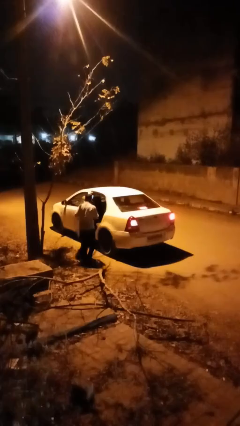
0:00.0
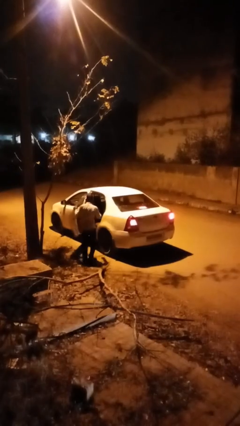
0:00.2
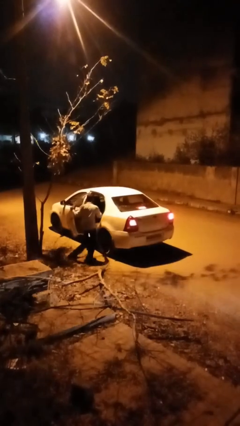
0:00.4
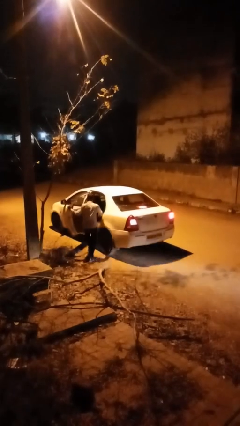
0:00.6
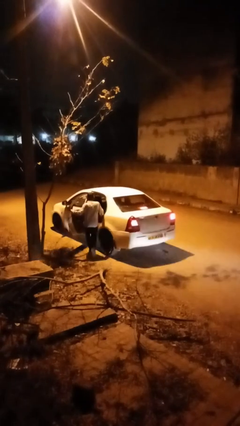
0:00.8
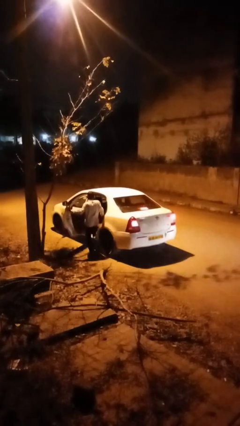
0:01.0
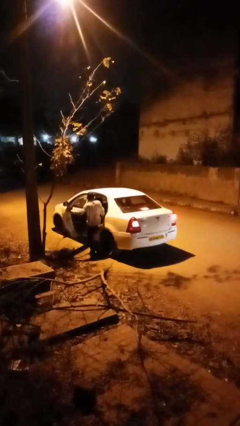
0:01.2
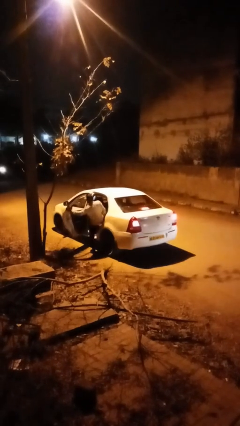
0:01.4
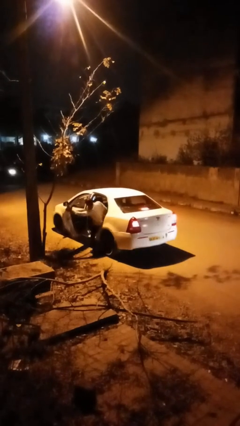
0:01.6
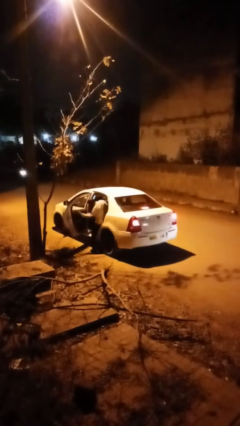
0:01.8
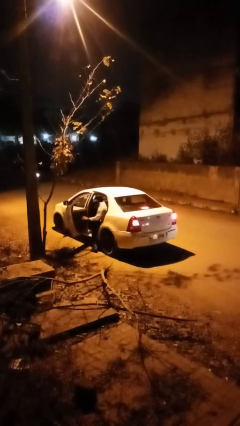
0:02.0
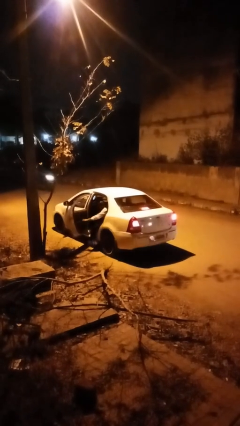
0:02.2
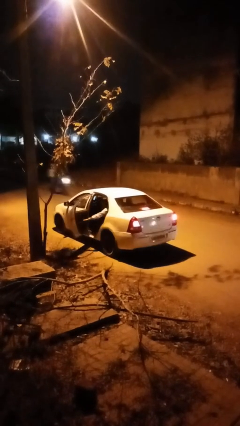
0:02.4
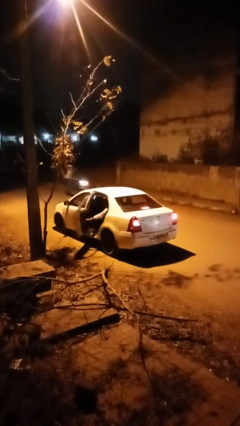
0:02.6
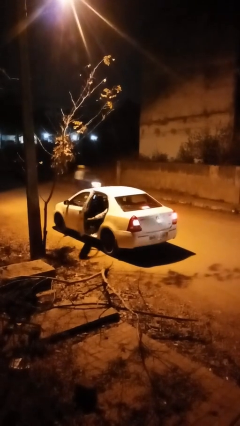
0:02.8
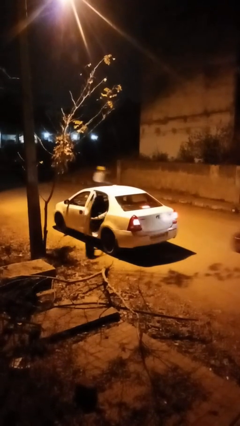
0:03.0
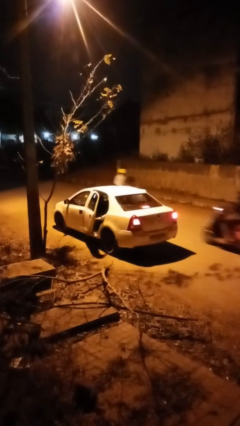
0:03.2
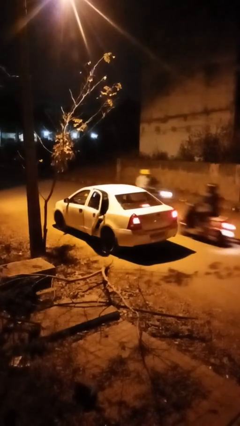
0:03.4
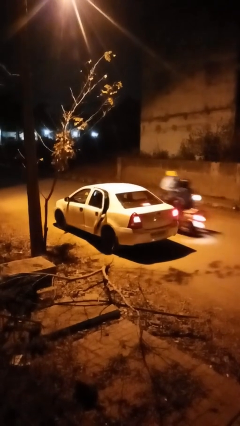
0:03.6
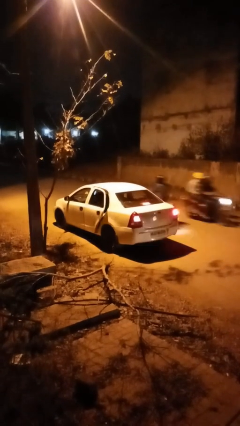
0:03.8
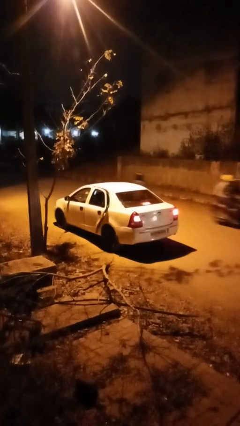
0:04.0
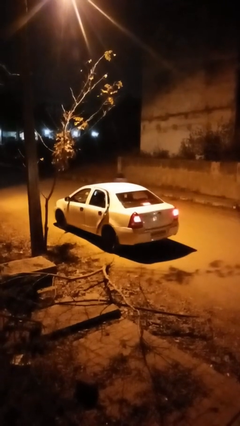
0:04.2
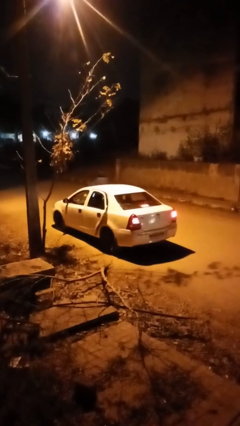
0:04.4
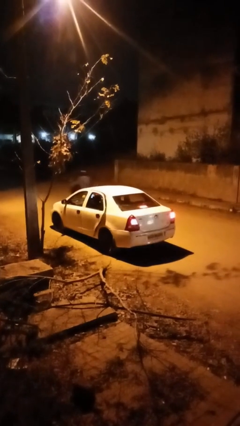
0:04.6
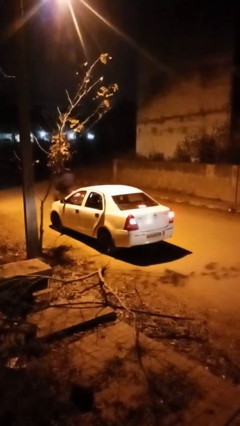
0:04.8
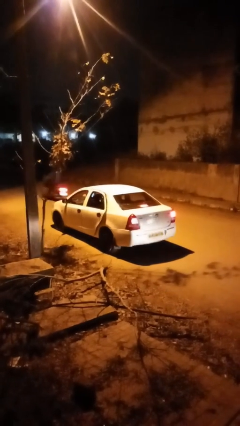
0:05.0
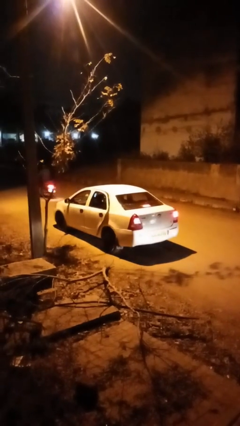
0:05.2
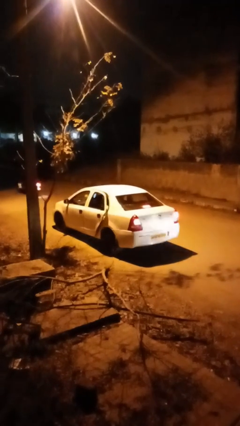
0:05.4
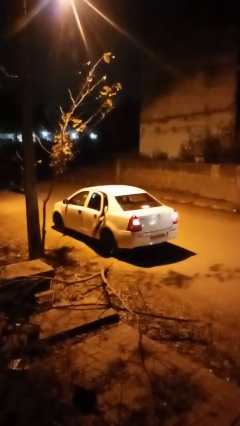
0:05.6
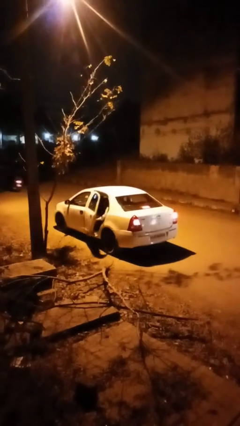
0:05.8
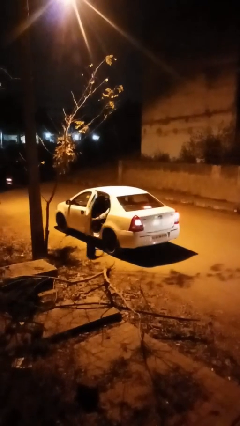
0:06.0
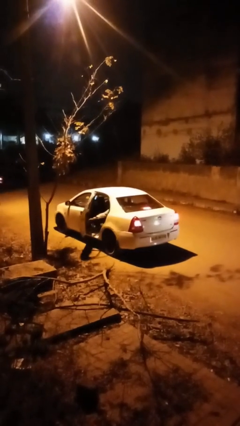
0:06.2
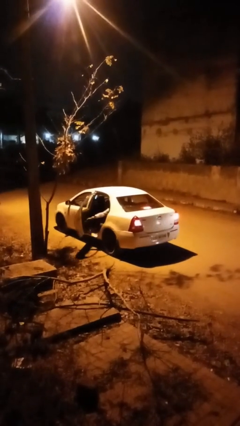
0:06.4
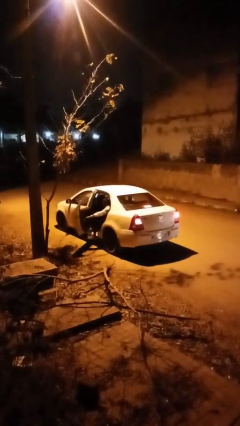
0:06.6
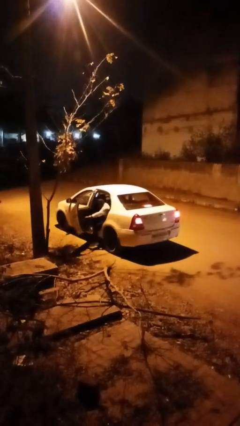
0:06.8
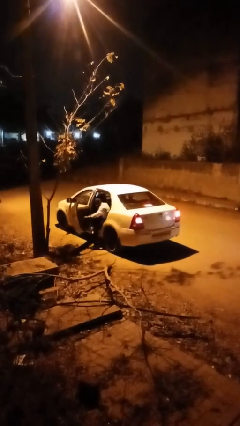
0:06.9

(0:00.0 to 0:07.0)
car picks up person

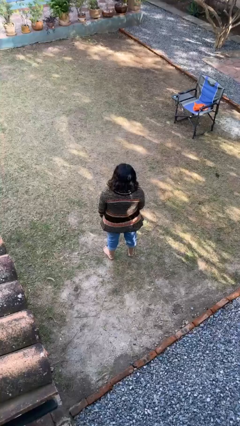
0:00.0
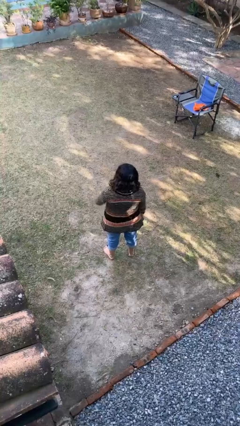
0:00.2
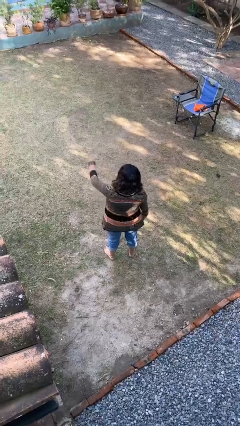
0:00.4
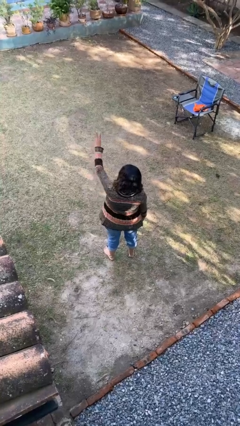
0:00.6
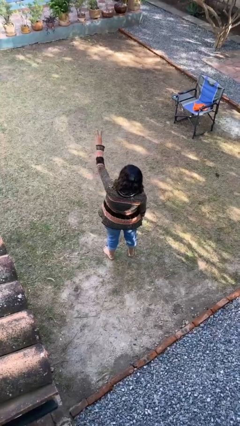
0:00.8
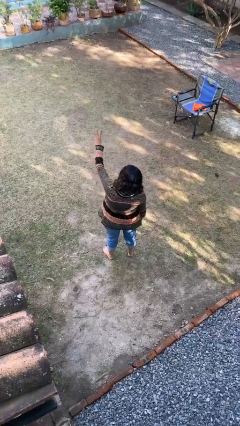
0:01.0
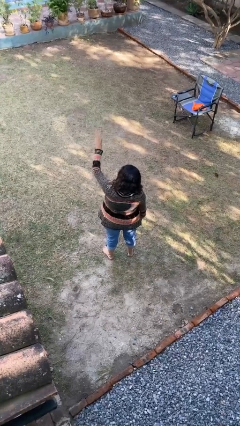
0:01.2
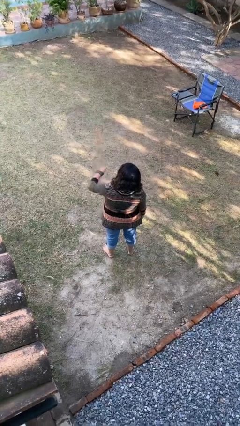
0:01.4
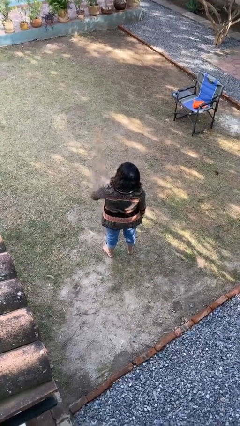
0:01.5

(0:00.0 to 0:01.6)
person gestures number three

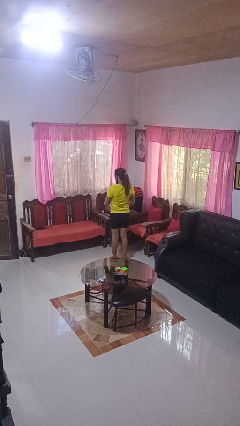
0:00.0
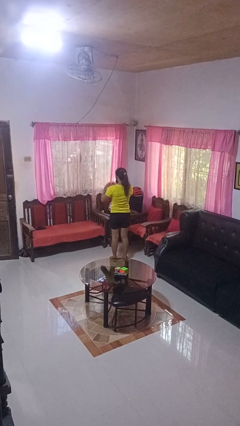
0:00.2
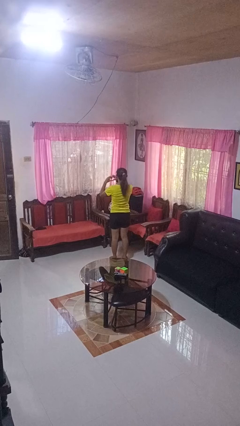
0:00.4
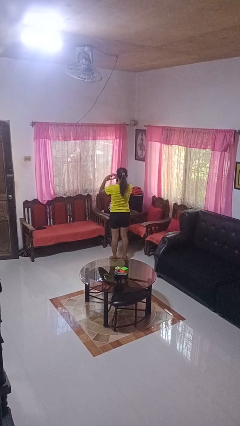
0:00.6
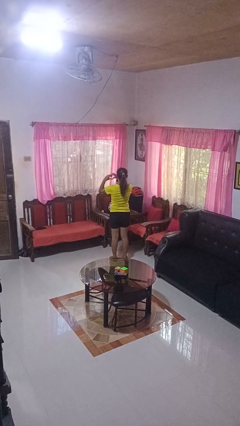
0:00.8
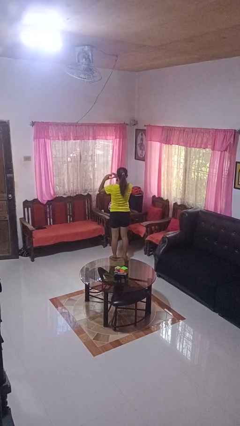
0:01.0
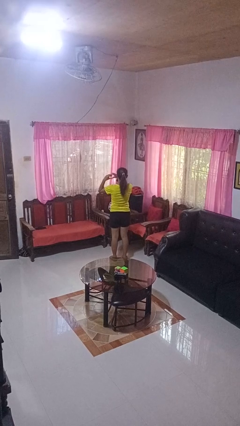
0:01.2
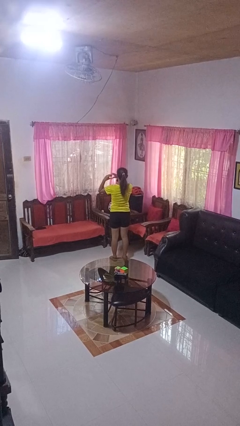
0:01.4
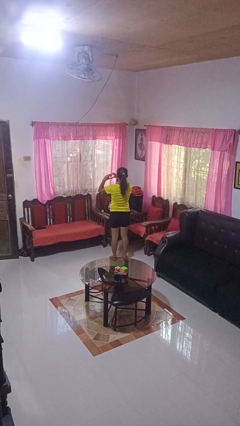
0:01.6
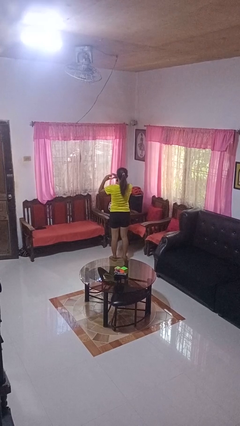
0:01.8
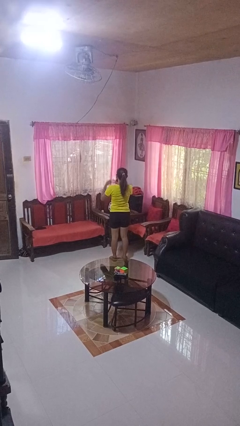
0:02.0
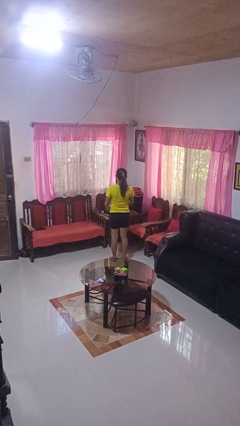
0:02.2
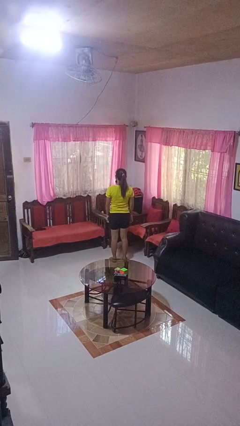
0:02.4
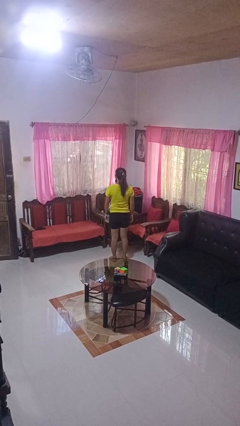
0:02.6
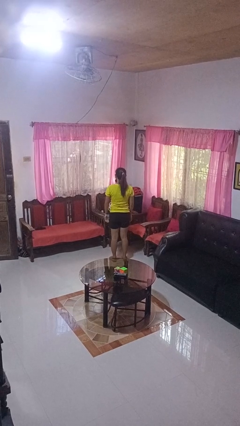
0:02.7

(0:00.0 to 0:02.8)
person gestures heart

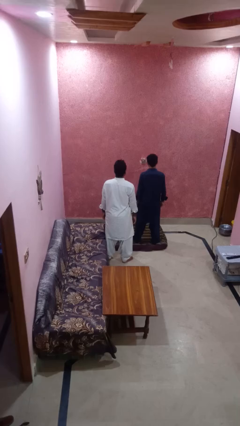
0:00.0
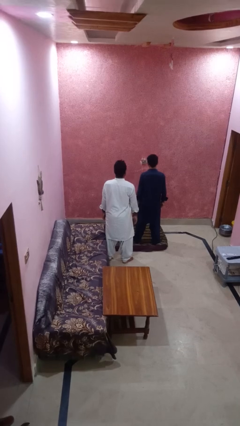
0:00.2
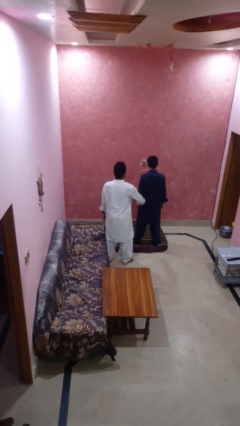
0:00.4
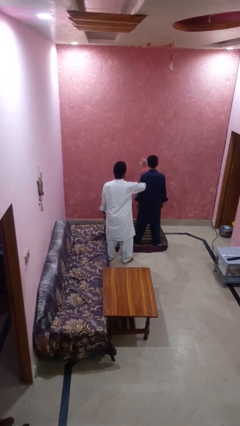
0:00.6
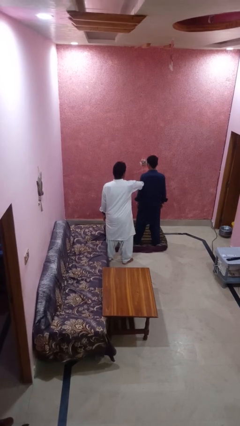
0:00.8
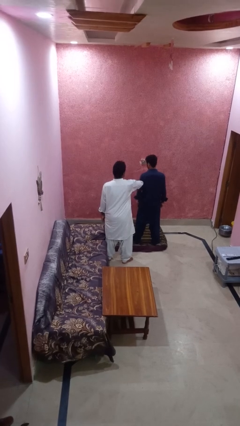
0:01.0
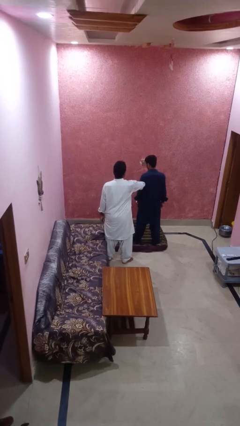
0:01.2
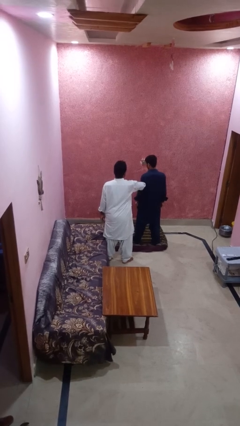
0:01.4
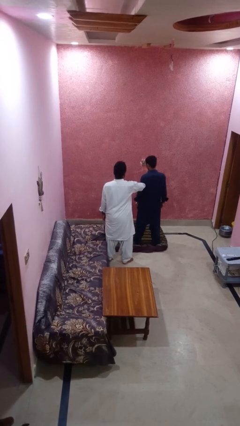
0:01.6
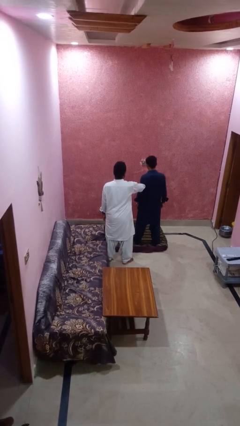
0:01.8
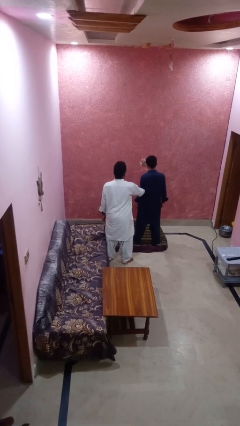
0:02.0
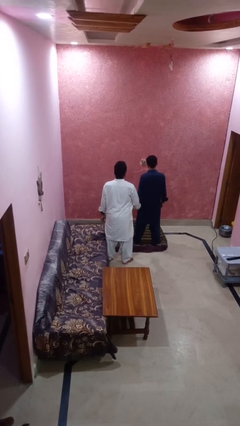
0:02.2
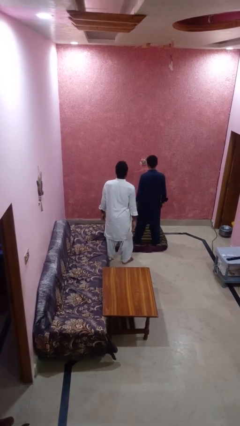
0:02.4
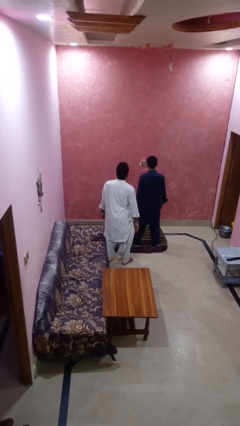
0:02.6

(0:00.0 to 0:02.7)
person grabs person by forearm

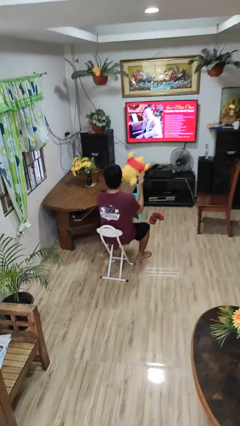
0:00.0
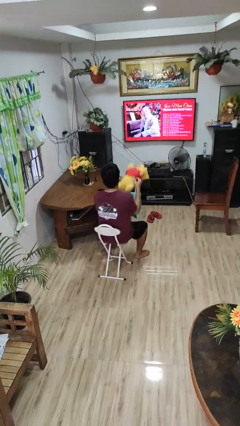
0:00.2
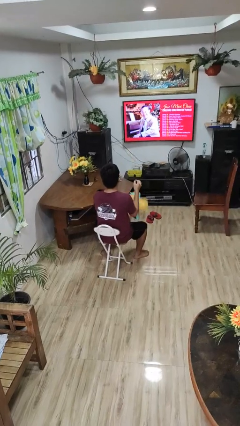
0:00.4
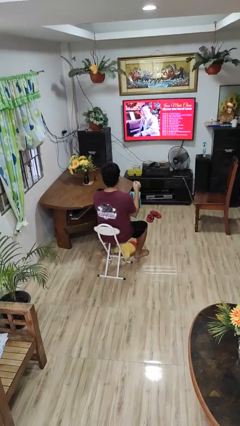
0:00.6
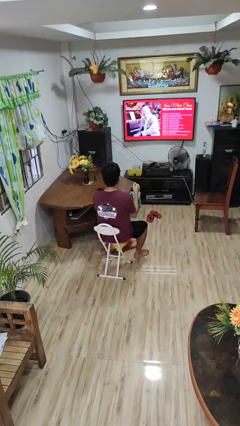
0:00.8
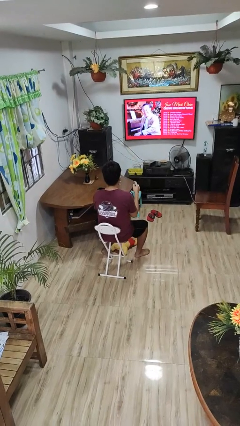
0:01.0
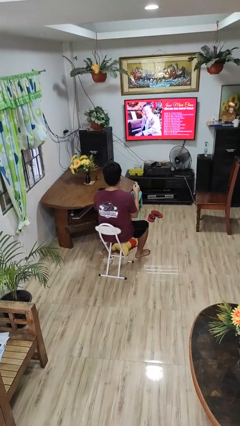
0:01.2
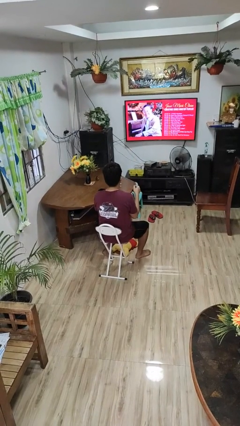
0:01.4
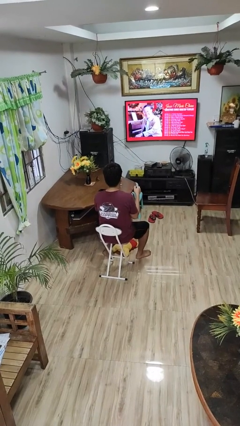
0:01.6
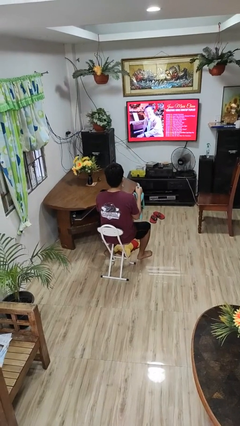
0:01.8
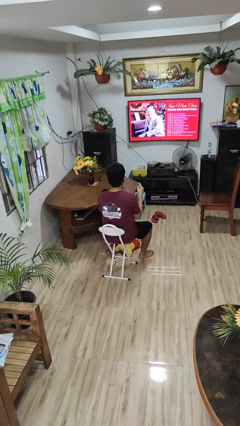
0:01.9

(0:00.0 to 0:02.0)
person drops object

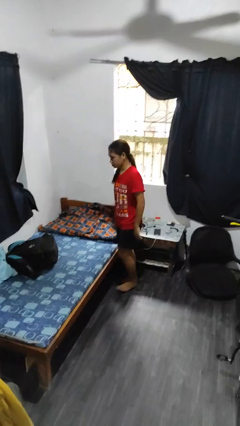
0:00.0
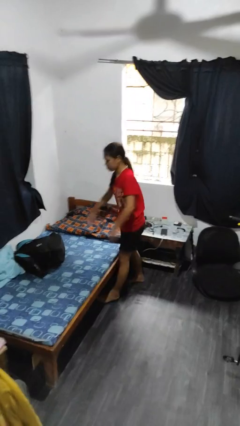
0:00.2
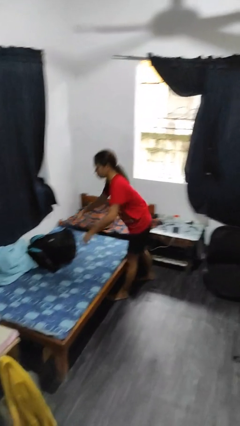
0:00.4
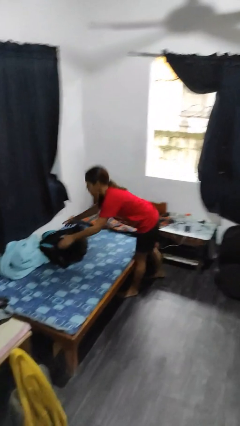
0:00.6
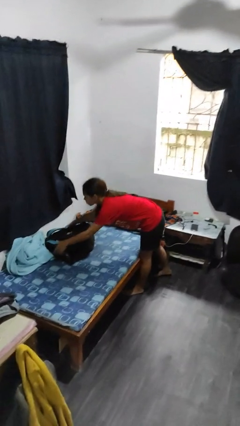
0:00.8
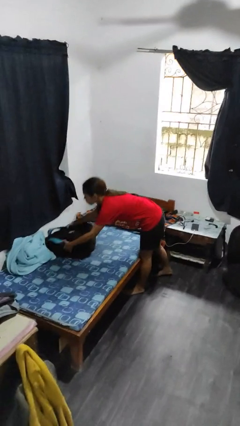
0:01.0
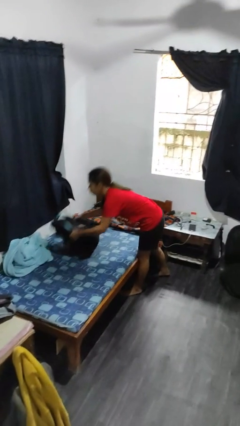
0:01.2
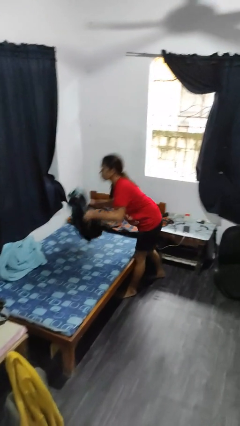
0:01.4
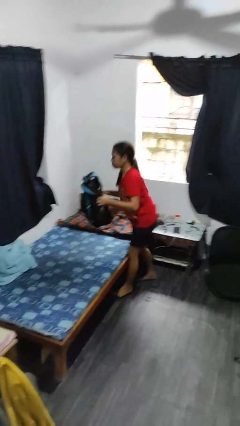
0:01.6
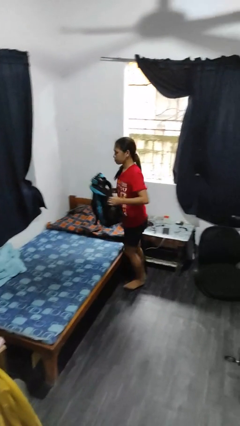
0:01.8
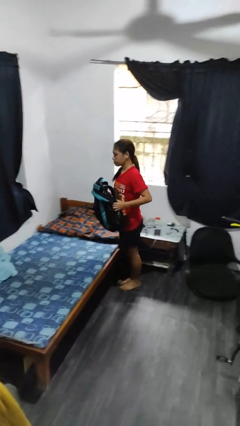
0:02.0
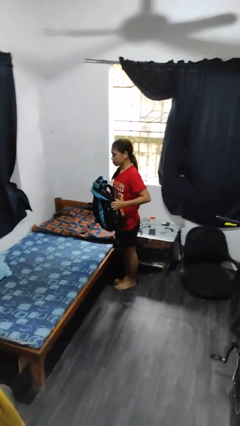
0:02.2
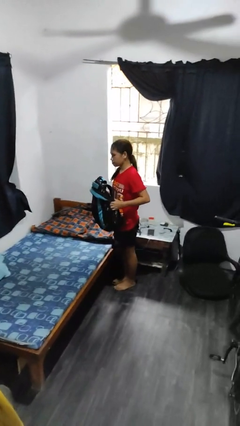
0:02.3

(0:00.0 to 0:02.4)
person picks up object from bed
